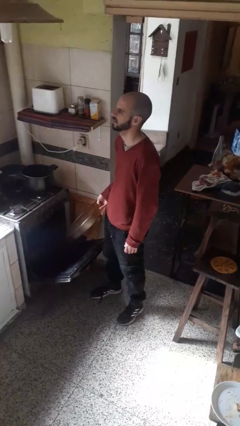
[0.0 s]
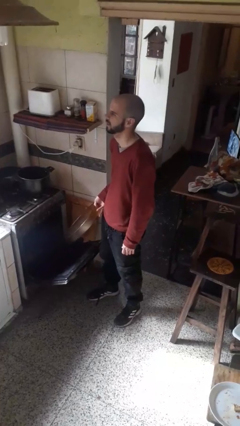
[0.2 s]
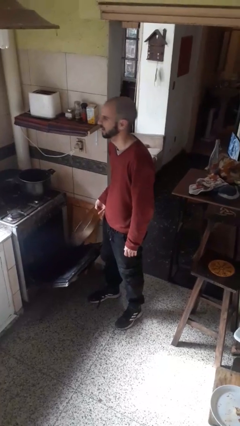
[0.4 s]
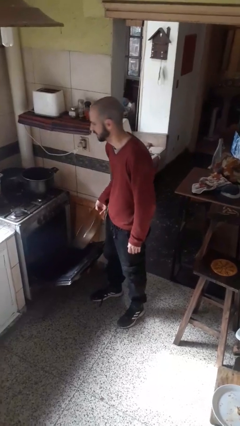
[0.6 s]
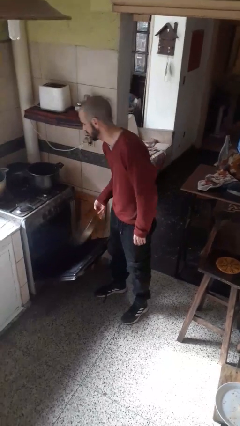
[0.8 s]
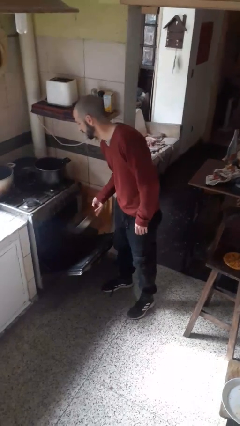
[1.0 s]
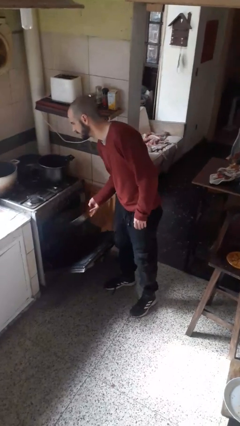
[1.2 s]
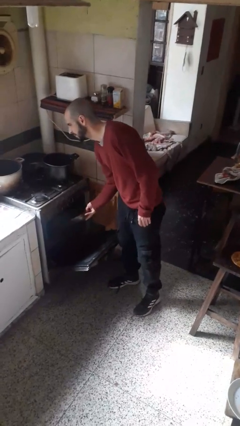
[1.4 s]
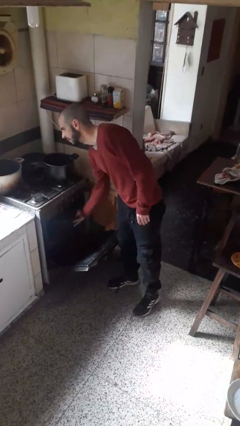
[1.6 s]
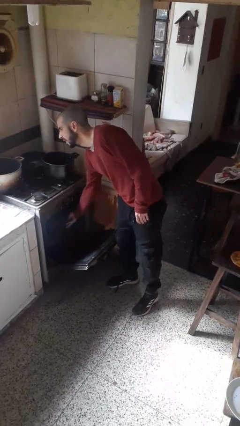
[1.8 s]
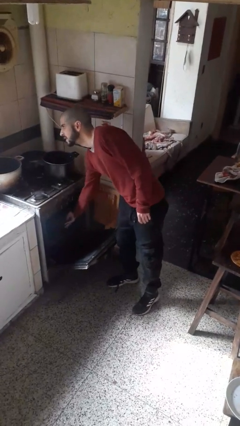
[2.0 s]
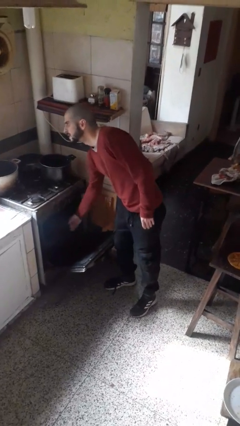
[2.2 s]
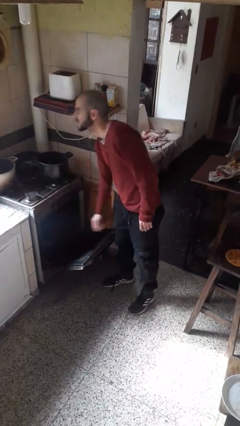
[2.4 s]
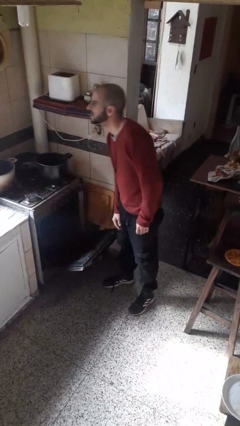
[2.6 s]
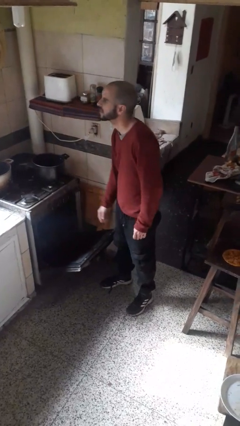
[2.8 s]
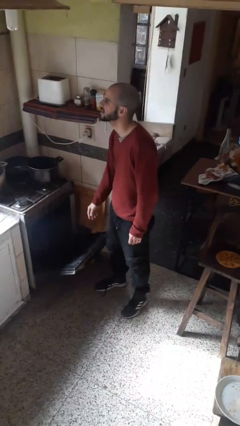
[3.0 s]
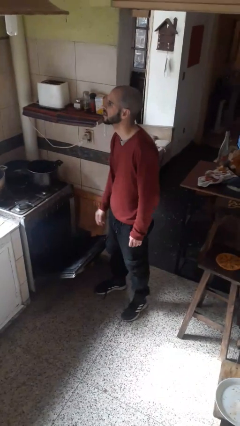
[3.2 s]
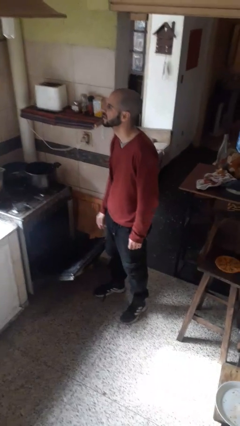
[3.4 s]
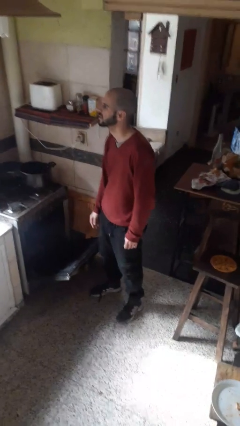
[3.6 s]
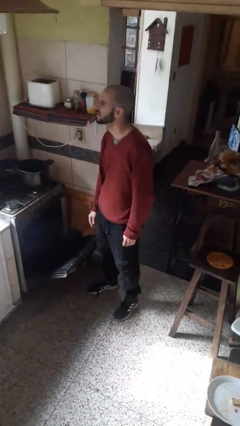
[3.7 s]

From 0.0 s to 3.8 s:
person puts object into oven

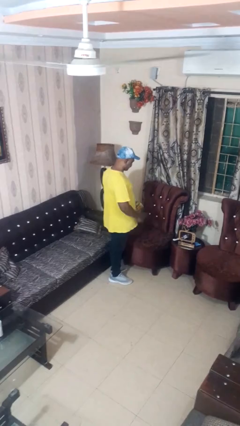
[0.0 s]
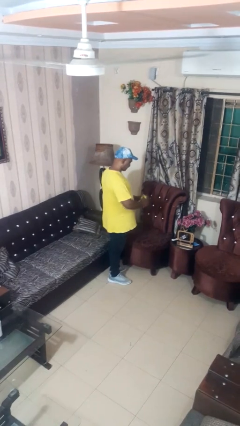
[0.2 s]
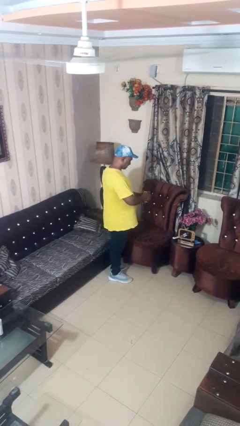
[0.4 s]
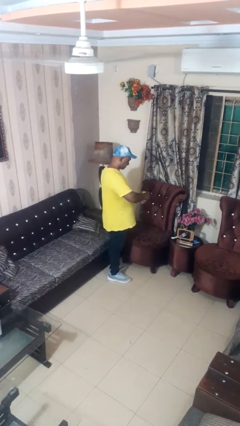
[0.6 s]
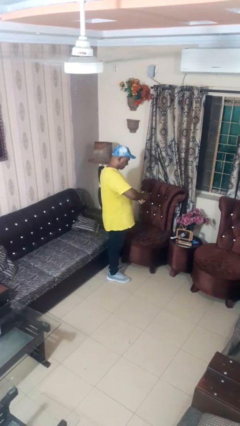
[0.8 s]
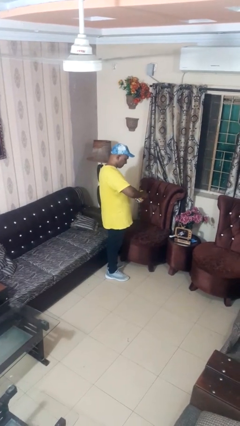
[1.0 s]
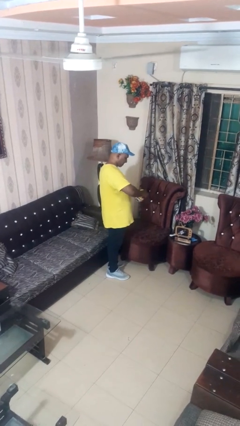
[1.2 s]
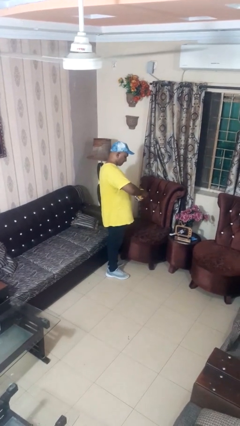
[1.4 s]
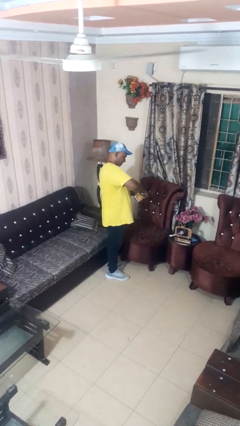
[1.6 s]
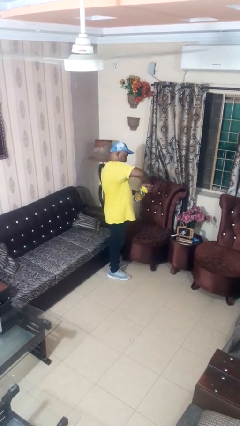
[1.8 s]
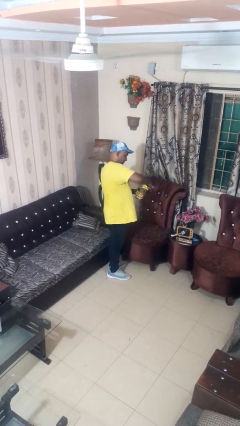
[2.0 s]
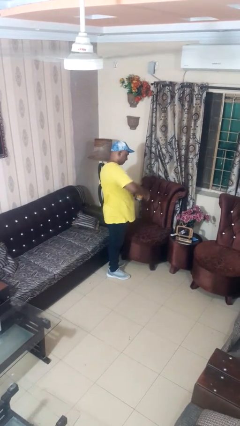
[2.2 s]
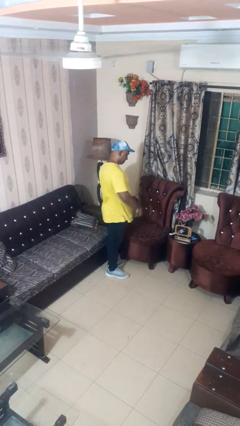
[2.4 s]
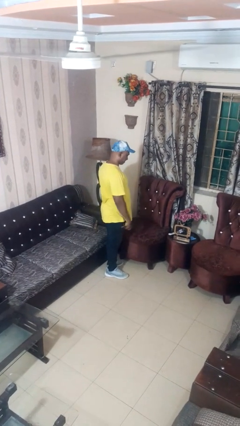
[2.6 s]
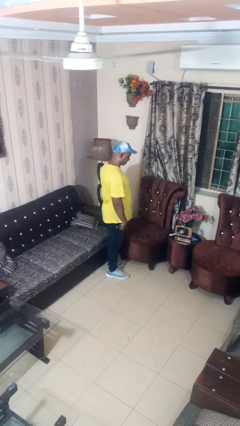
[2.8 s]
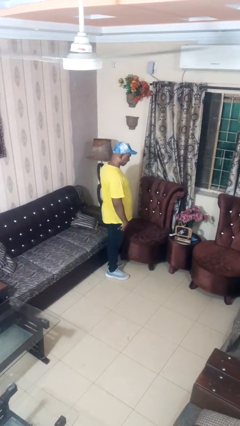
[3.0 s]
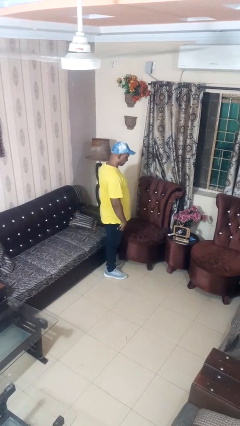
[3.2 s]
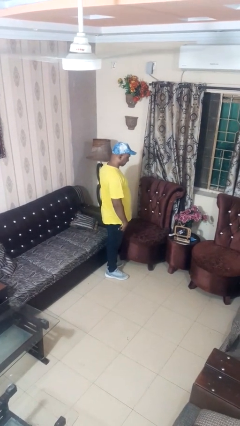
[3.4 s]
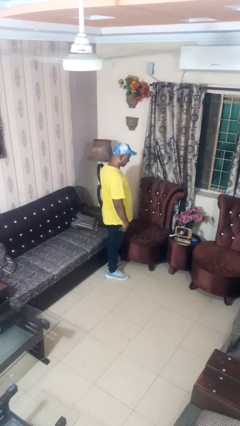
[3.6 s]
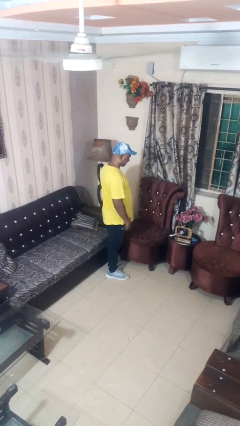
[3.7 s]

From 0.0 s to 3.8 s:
person opens can with can opener

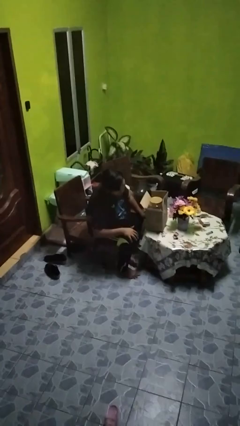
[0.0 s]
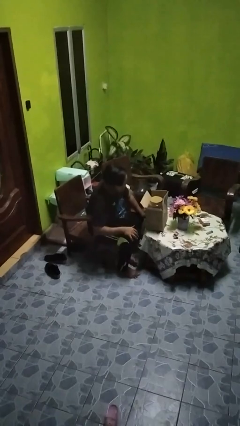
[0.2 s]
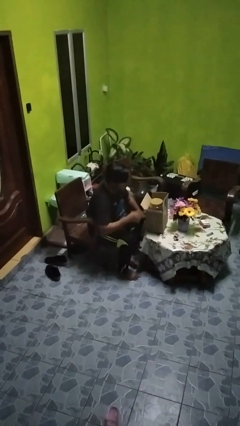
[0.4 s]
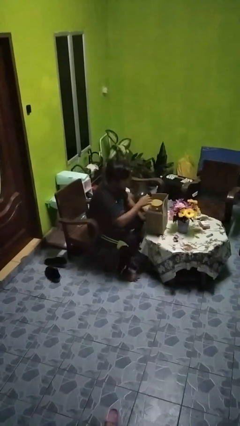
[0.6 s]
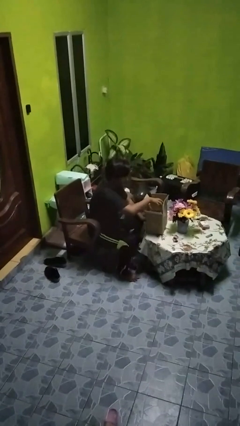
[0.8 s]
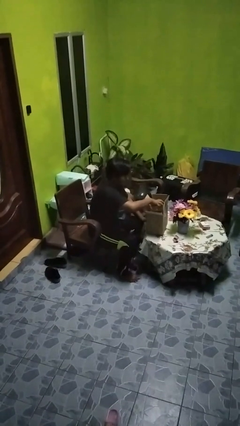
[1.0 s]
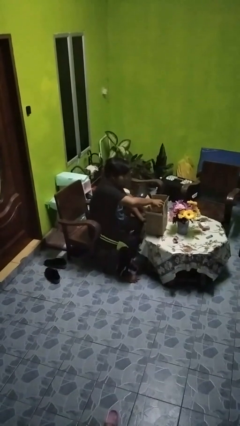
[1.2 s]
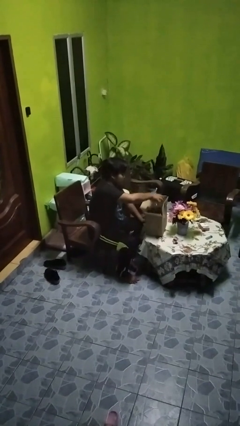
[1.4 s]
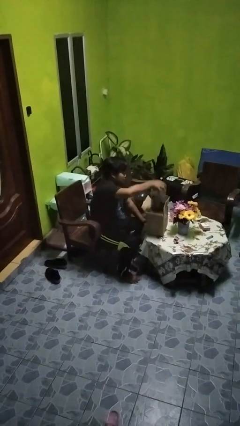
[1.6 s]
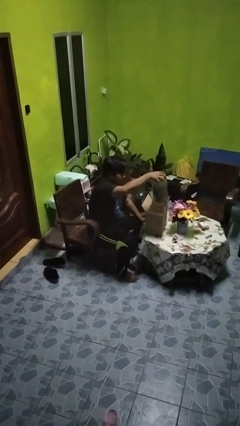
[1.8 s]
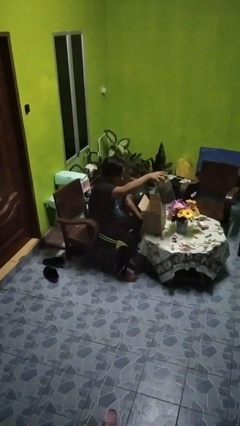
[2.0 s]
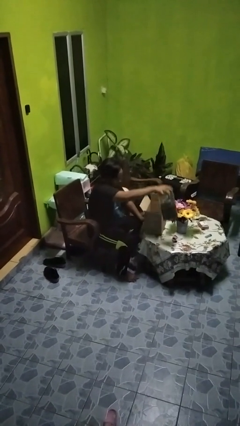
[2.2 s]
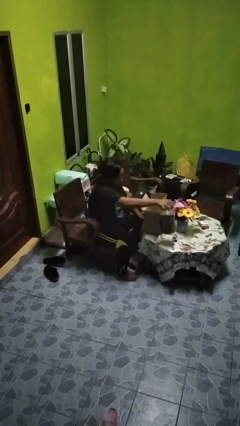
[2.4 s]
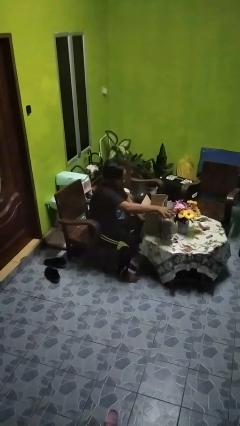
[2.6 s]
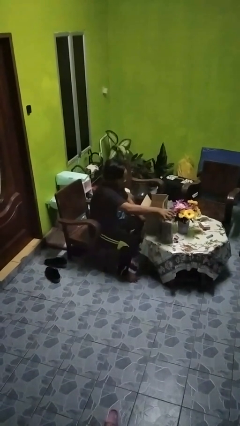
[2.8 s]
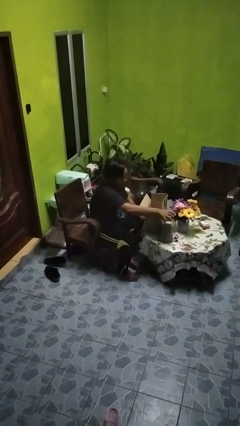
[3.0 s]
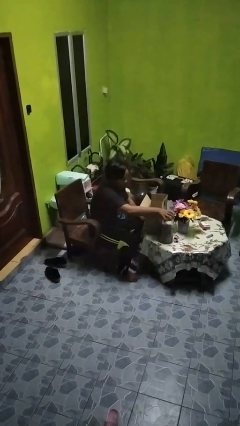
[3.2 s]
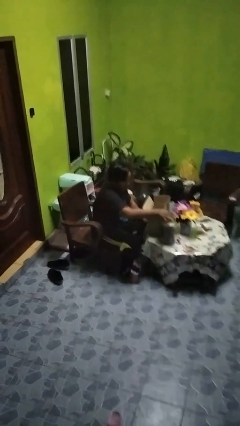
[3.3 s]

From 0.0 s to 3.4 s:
person takes object from box

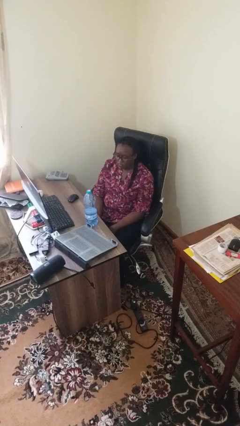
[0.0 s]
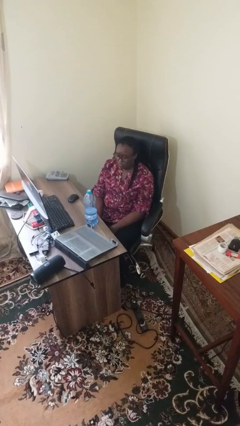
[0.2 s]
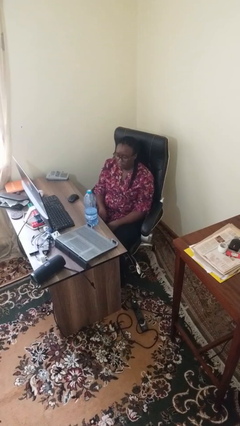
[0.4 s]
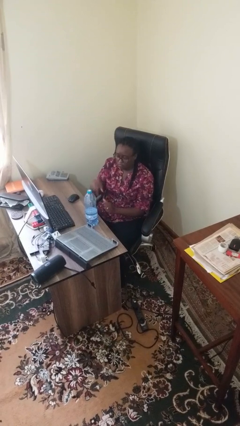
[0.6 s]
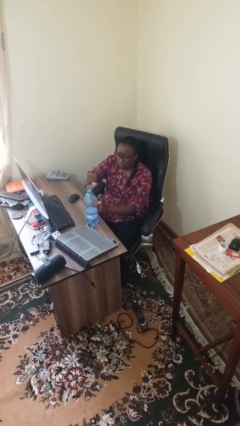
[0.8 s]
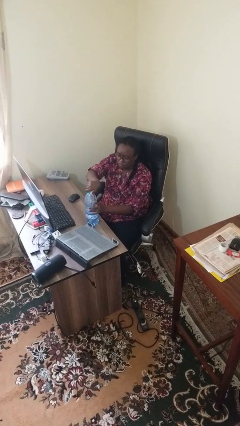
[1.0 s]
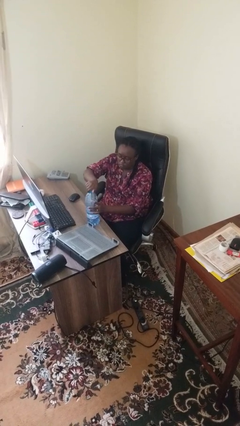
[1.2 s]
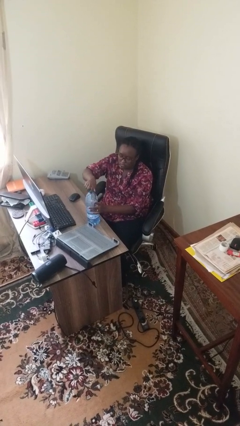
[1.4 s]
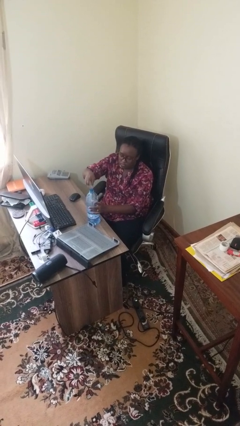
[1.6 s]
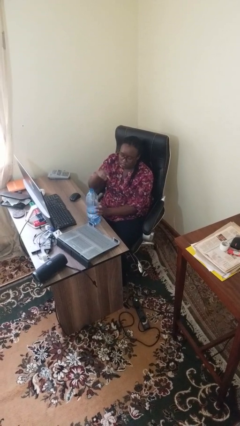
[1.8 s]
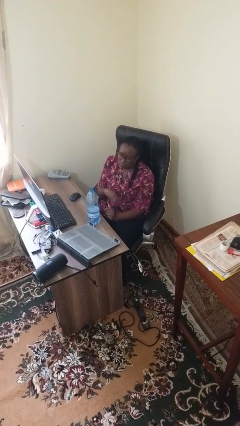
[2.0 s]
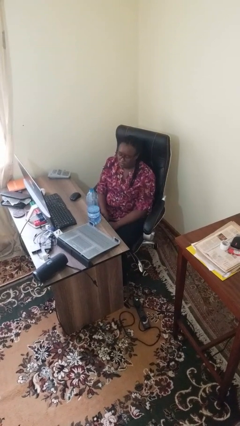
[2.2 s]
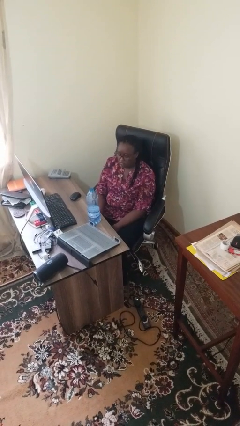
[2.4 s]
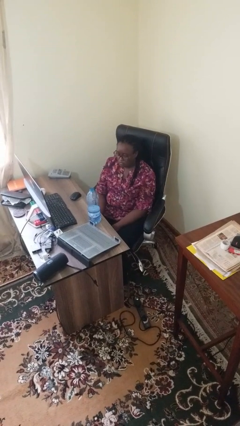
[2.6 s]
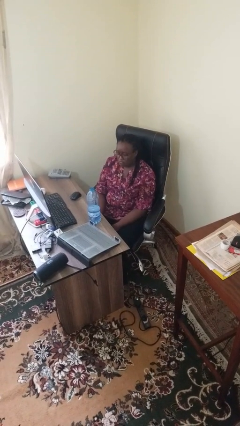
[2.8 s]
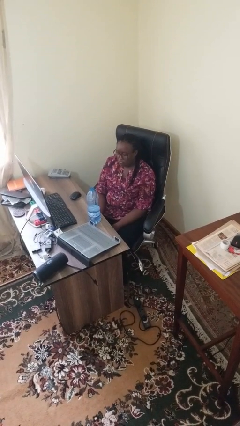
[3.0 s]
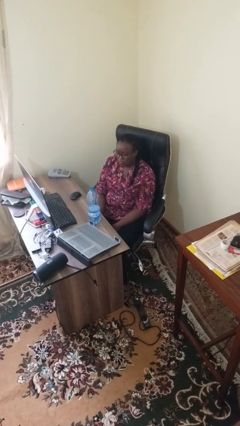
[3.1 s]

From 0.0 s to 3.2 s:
person unscrews lid from bottle

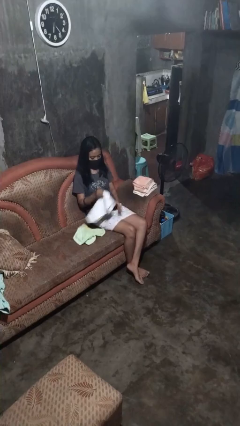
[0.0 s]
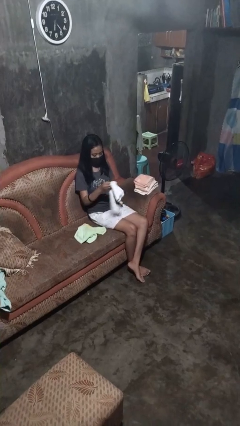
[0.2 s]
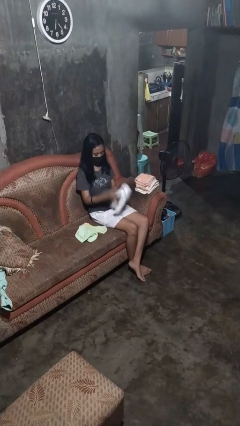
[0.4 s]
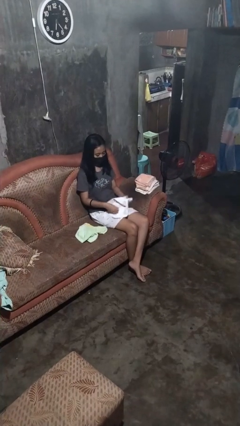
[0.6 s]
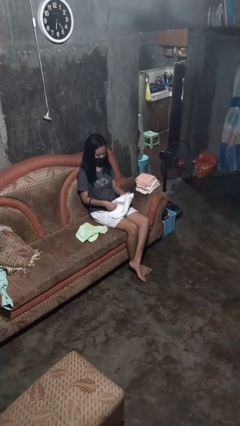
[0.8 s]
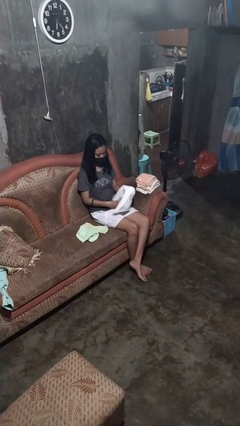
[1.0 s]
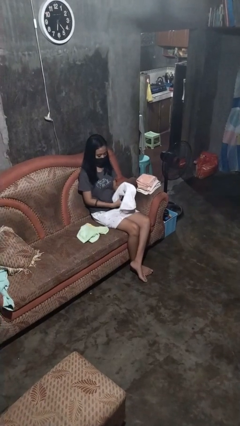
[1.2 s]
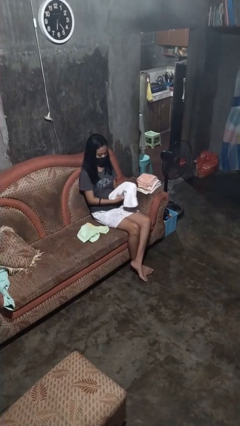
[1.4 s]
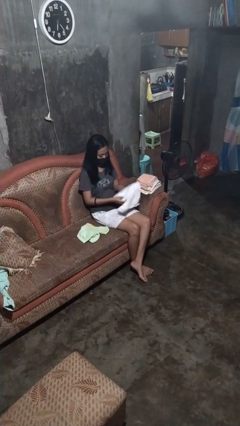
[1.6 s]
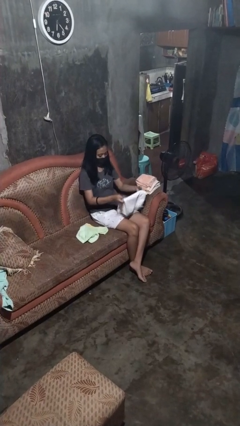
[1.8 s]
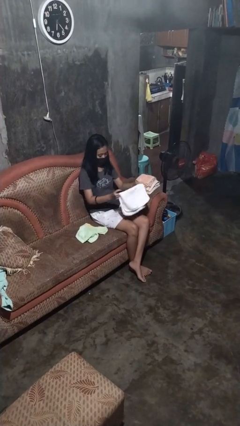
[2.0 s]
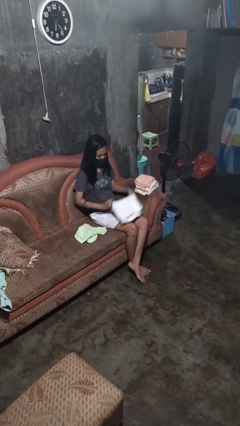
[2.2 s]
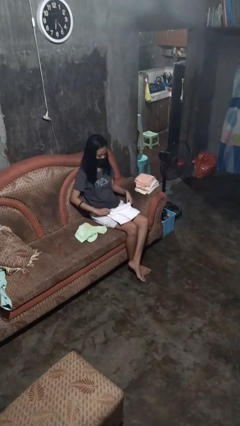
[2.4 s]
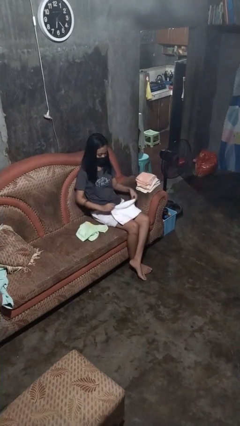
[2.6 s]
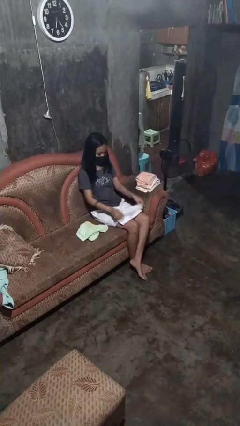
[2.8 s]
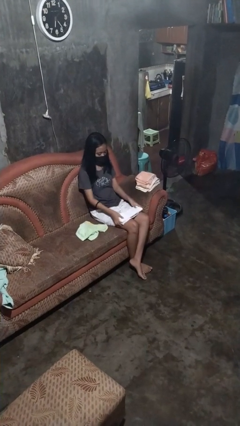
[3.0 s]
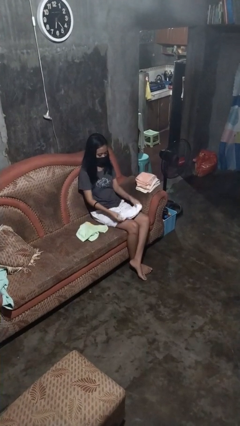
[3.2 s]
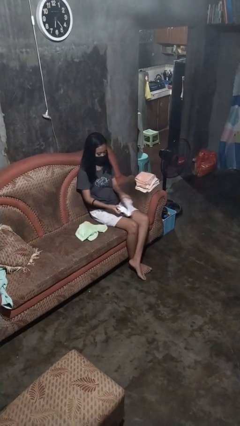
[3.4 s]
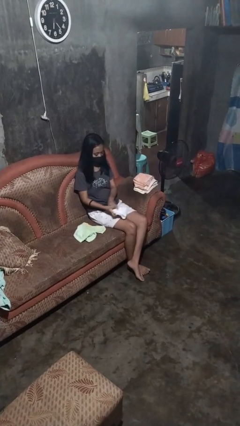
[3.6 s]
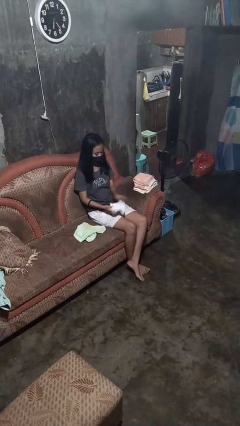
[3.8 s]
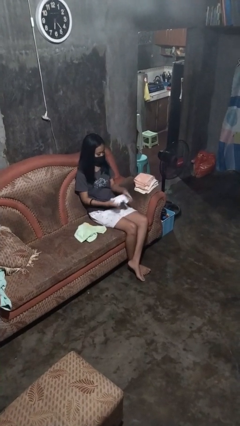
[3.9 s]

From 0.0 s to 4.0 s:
person folds towel
